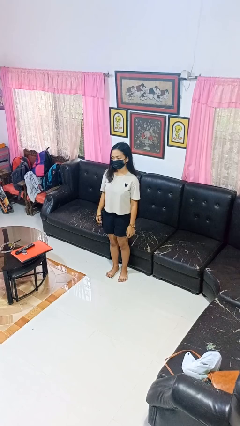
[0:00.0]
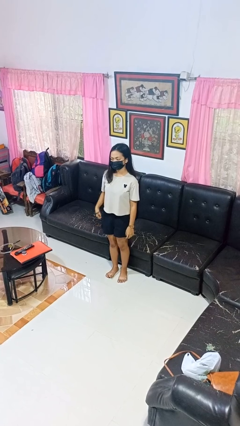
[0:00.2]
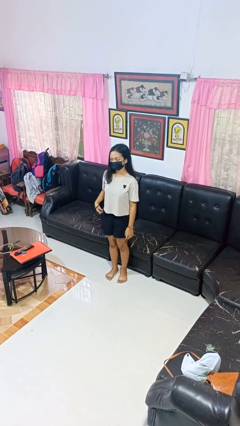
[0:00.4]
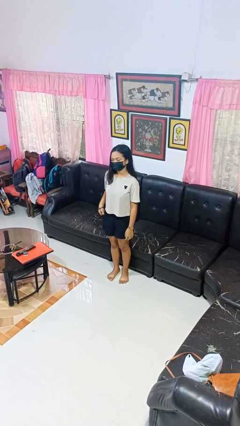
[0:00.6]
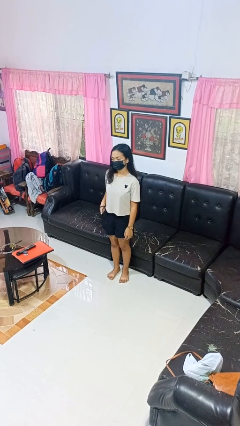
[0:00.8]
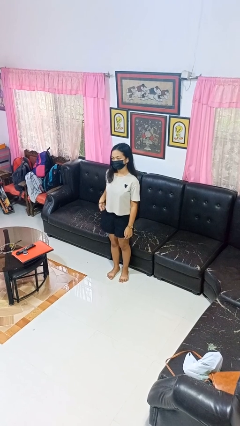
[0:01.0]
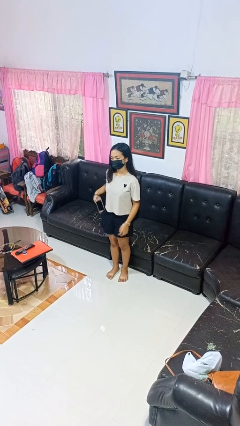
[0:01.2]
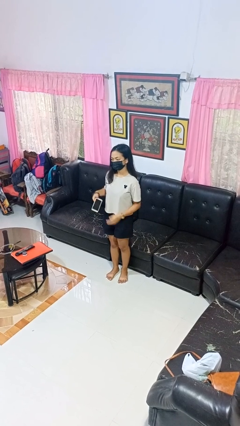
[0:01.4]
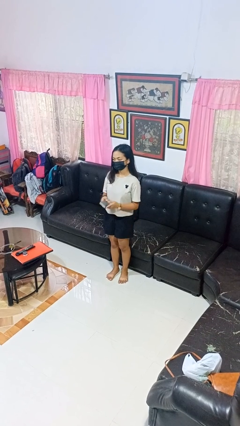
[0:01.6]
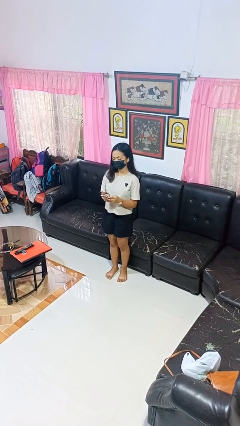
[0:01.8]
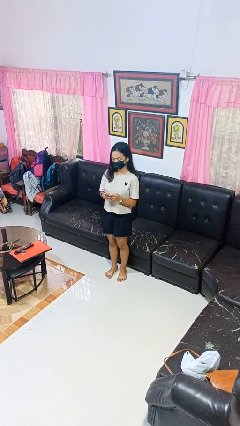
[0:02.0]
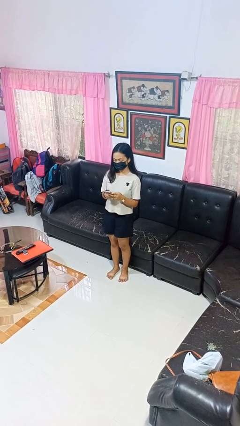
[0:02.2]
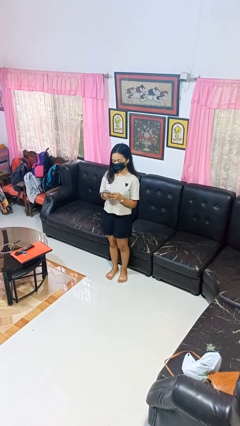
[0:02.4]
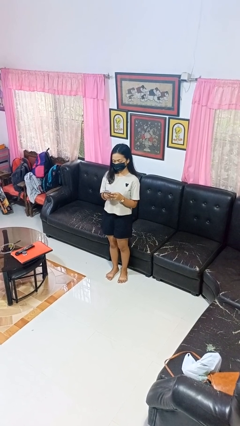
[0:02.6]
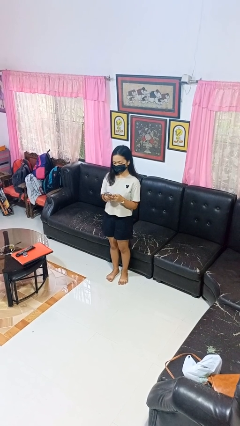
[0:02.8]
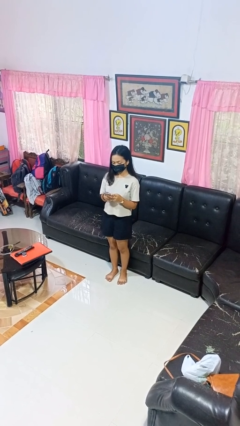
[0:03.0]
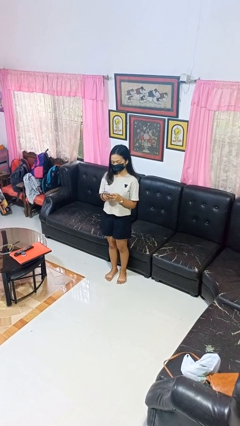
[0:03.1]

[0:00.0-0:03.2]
person takes phone from pocket

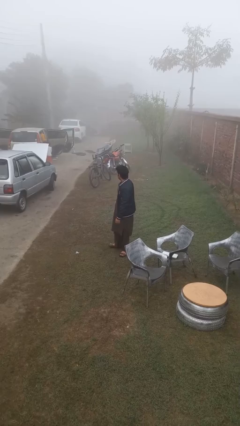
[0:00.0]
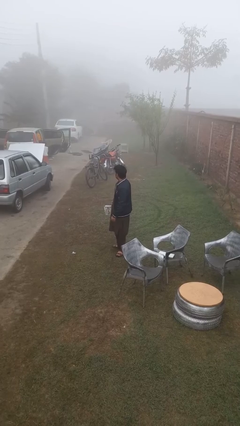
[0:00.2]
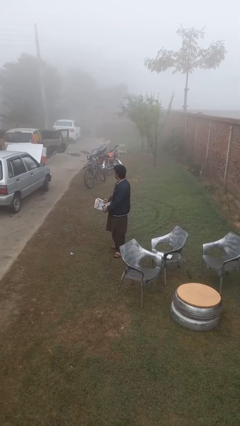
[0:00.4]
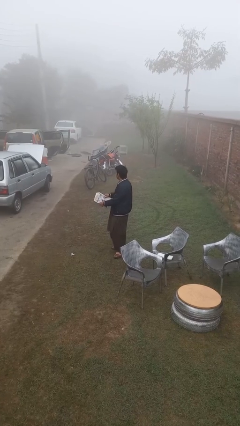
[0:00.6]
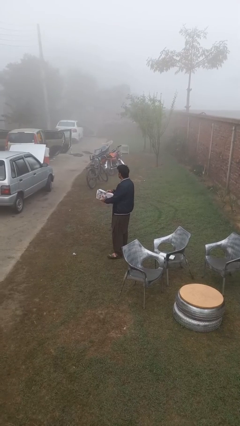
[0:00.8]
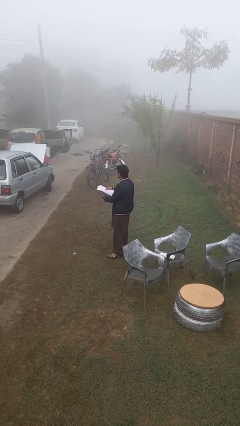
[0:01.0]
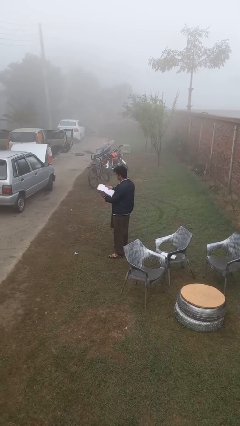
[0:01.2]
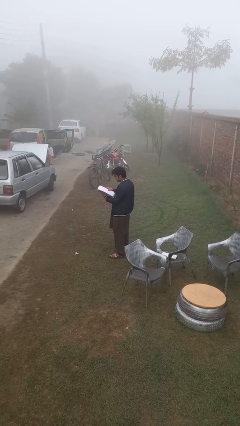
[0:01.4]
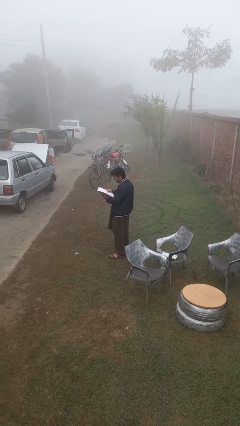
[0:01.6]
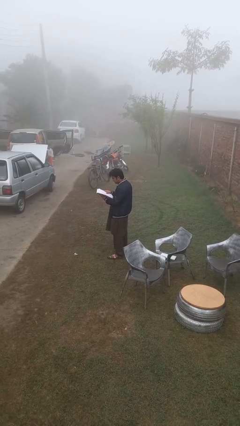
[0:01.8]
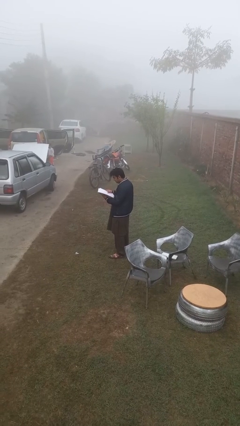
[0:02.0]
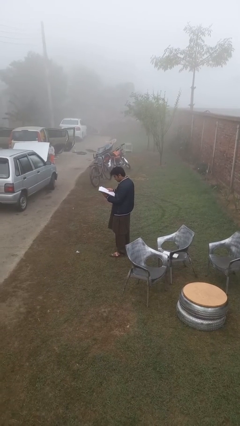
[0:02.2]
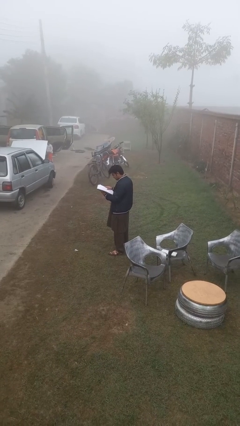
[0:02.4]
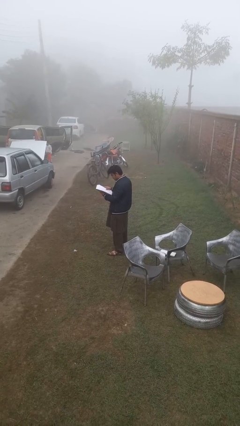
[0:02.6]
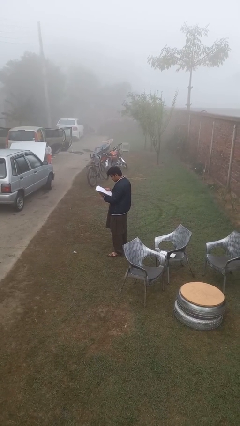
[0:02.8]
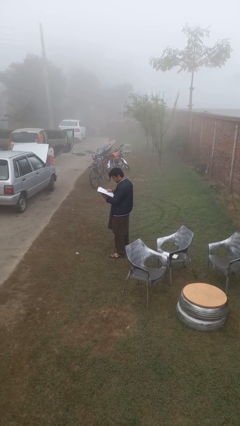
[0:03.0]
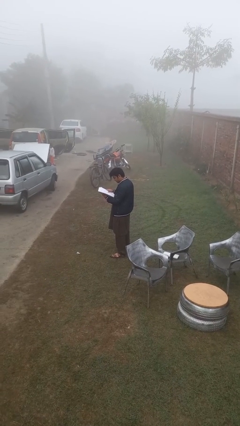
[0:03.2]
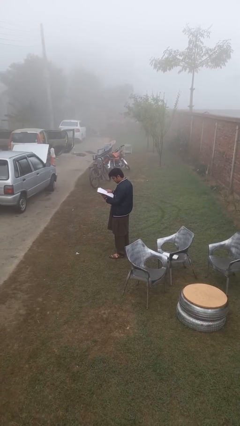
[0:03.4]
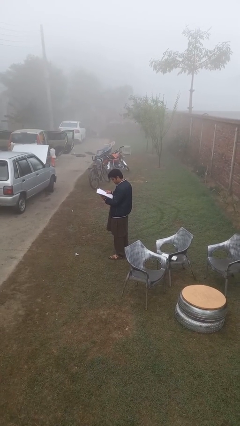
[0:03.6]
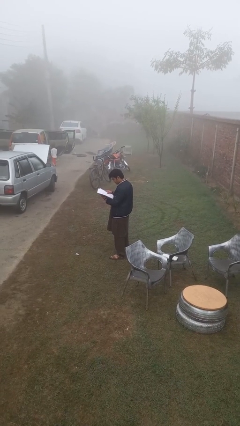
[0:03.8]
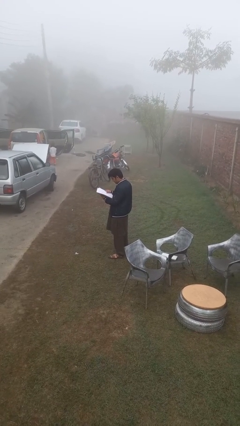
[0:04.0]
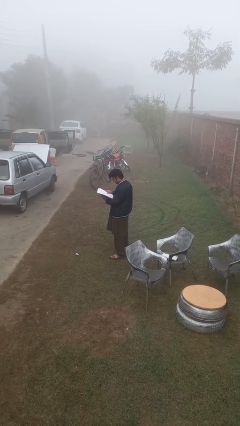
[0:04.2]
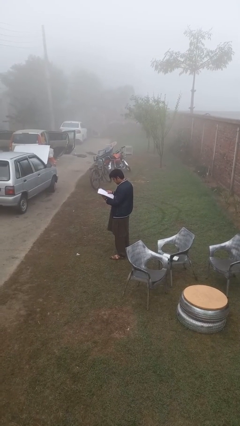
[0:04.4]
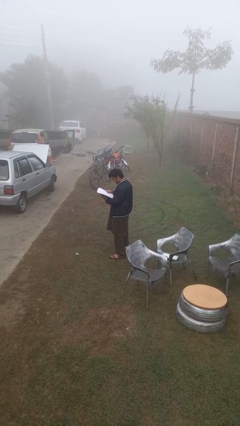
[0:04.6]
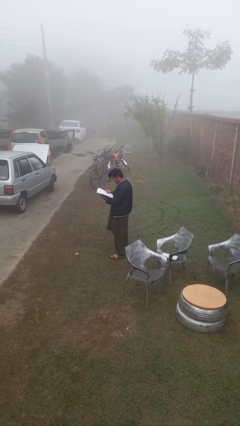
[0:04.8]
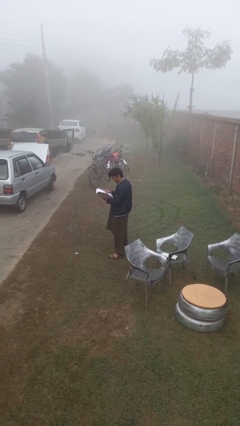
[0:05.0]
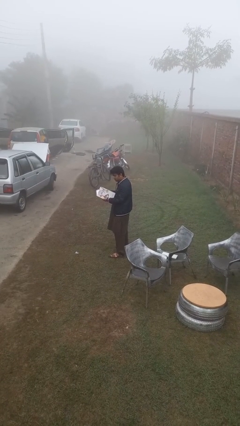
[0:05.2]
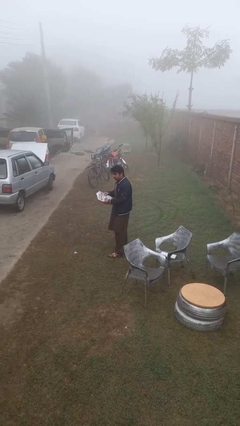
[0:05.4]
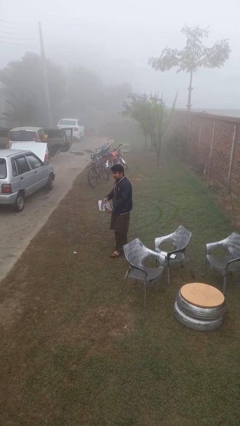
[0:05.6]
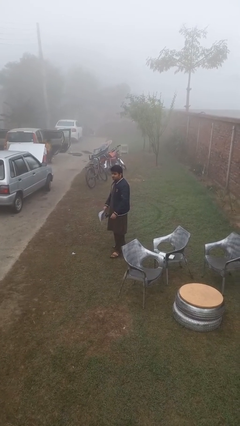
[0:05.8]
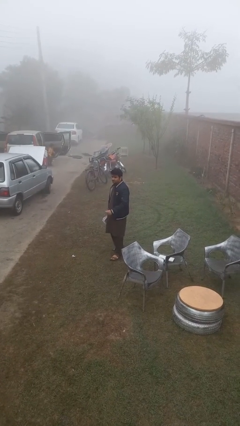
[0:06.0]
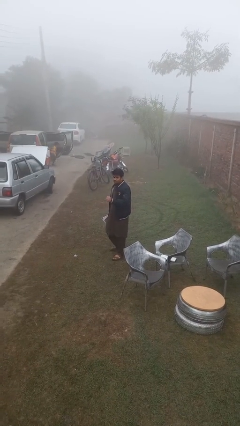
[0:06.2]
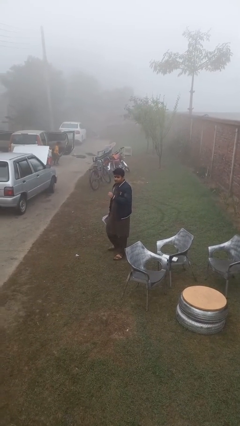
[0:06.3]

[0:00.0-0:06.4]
person reads document

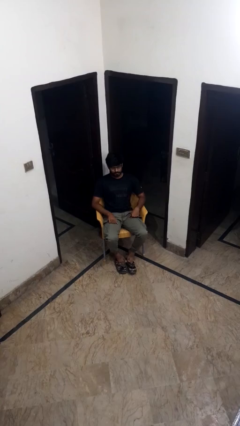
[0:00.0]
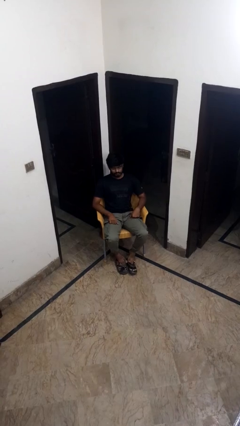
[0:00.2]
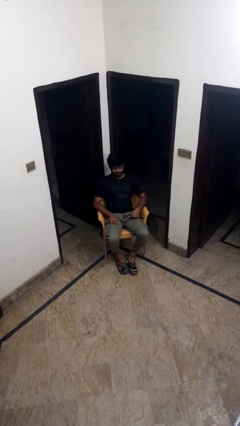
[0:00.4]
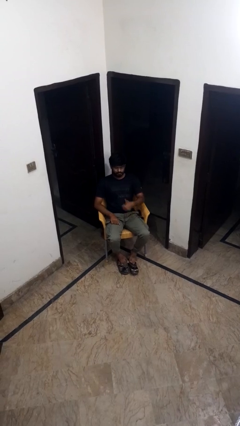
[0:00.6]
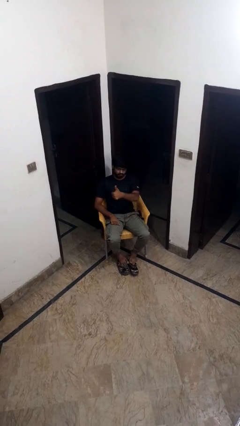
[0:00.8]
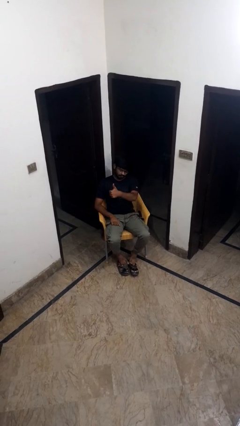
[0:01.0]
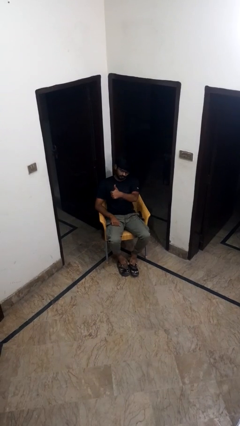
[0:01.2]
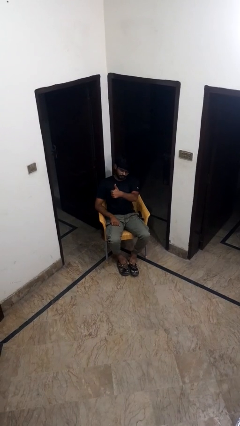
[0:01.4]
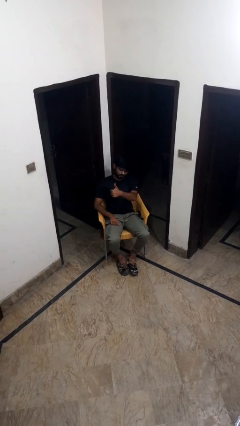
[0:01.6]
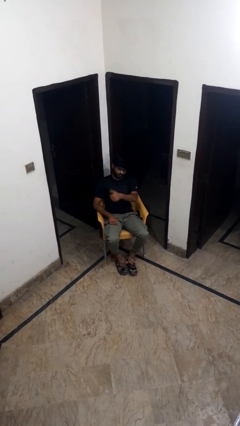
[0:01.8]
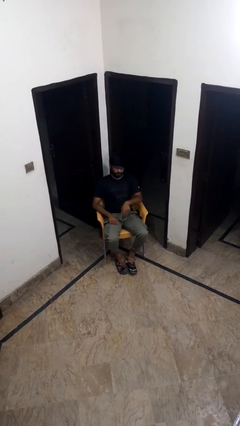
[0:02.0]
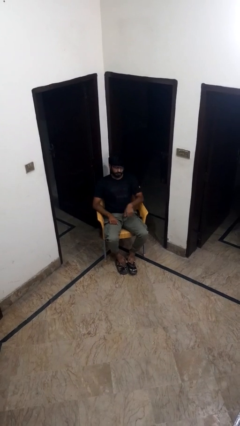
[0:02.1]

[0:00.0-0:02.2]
person gestures thumbs up

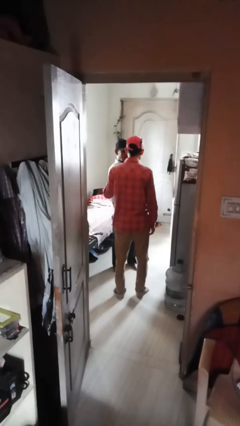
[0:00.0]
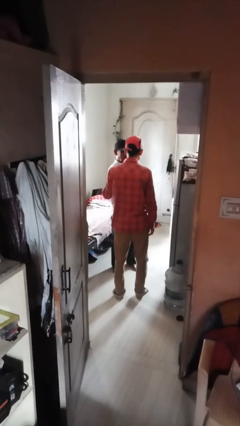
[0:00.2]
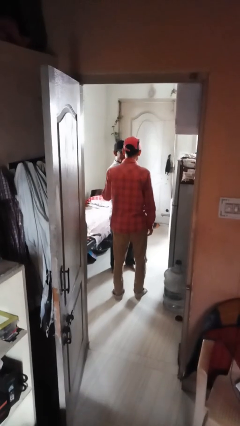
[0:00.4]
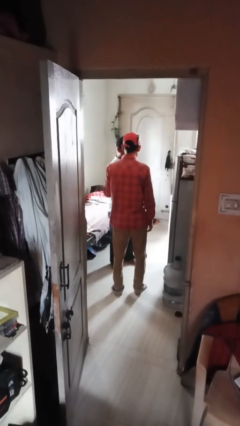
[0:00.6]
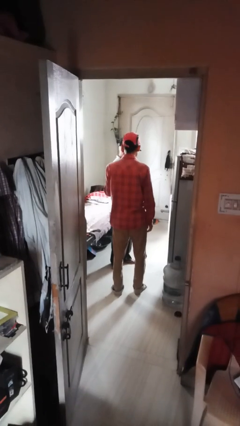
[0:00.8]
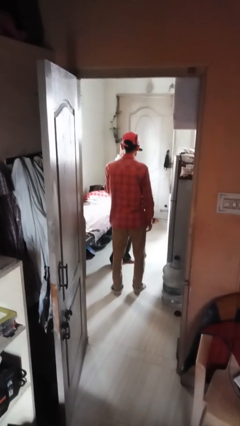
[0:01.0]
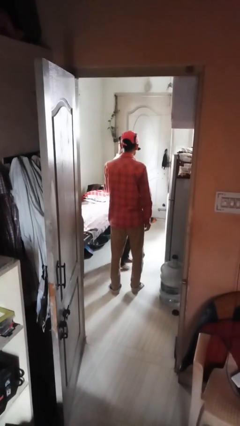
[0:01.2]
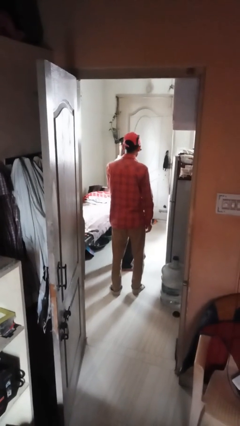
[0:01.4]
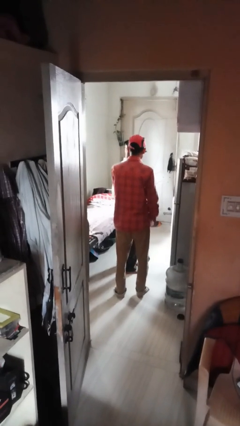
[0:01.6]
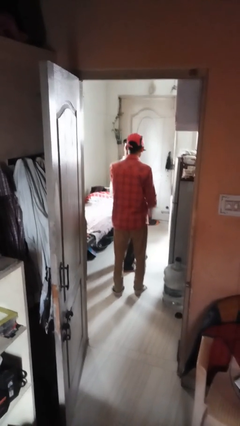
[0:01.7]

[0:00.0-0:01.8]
person spins person around

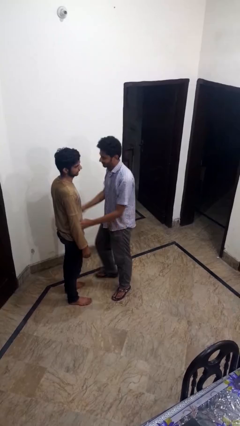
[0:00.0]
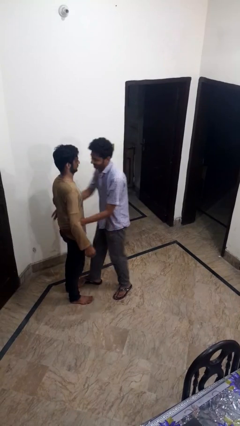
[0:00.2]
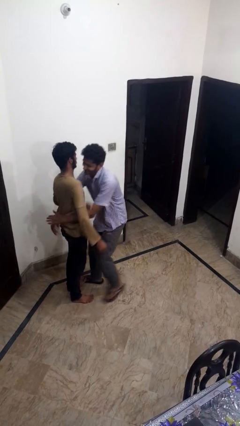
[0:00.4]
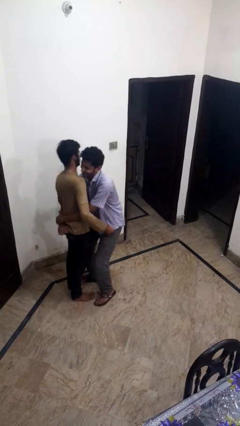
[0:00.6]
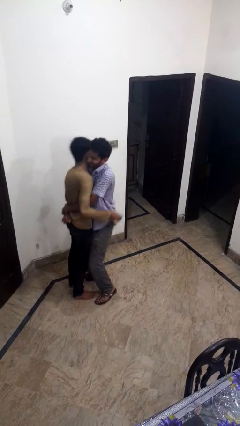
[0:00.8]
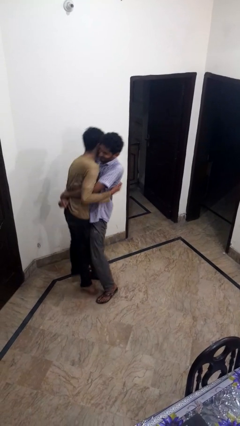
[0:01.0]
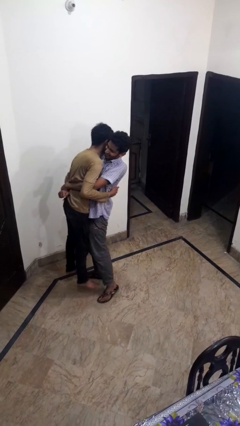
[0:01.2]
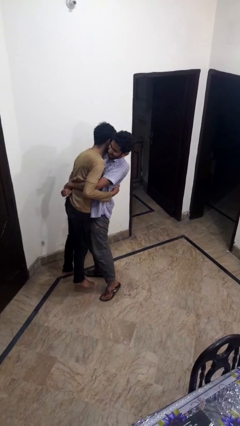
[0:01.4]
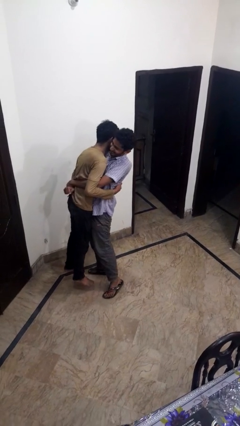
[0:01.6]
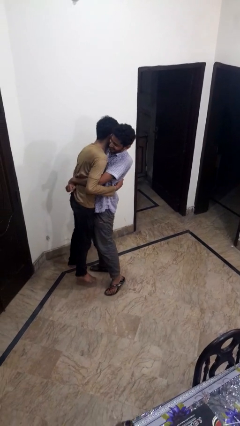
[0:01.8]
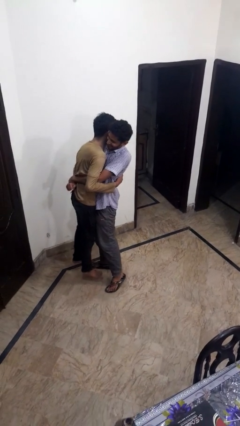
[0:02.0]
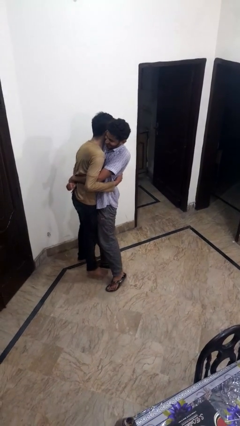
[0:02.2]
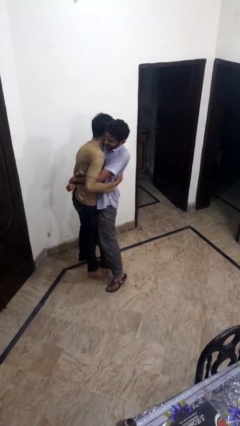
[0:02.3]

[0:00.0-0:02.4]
person picks up person

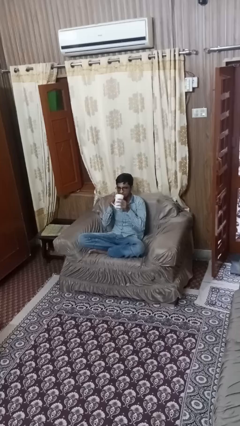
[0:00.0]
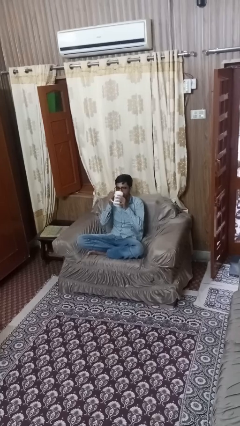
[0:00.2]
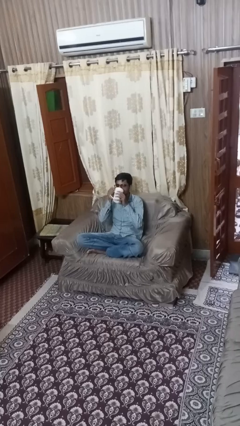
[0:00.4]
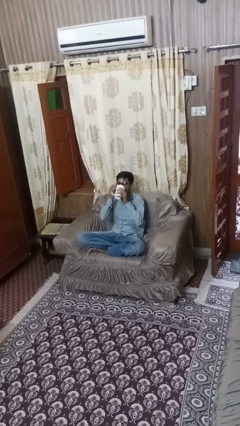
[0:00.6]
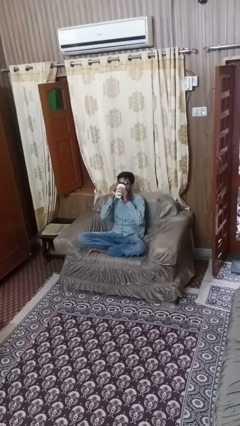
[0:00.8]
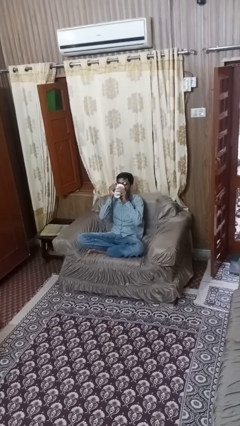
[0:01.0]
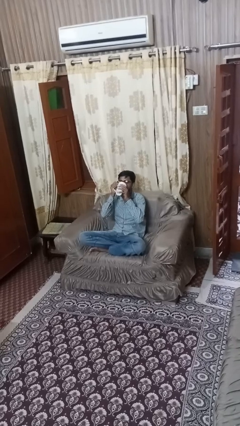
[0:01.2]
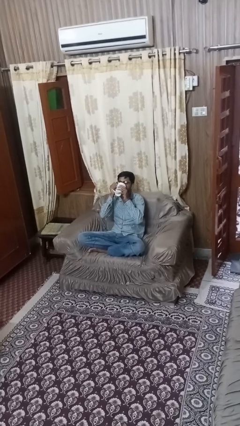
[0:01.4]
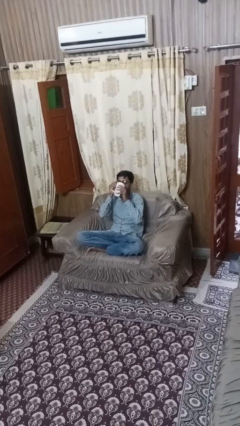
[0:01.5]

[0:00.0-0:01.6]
person drinks from mug
